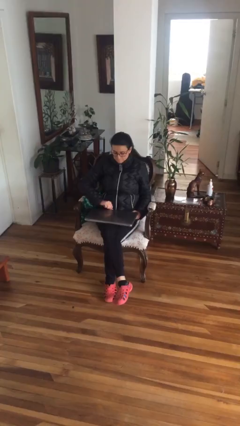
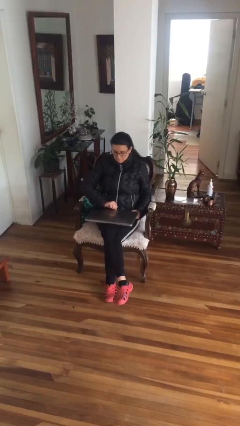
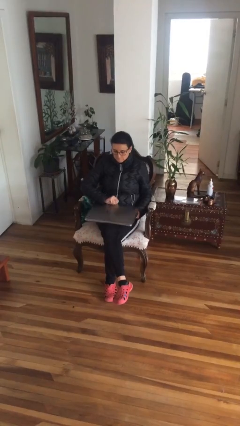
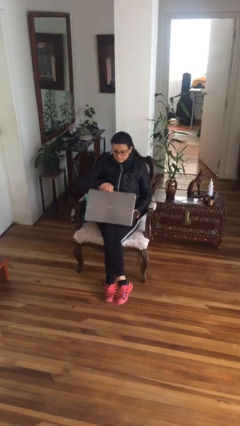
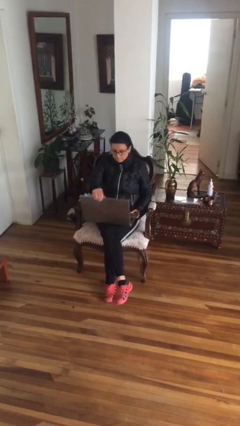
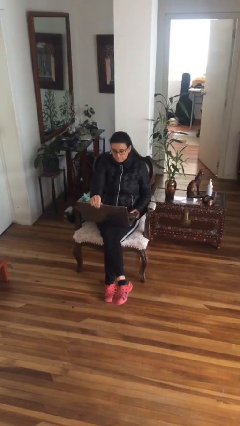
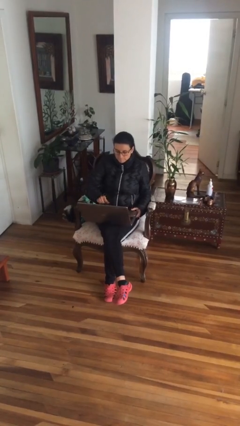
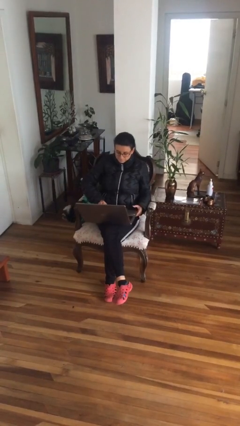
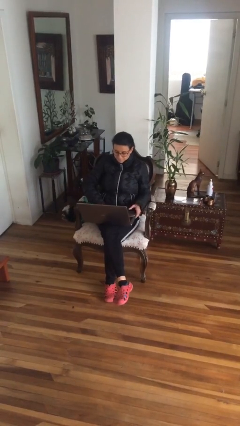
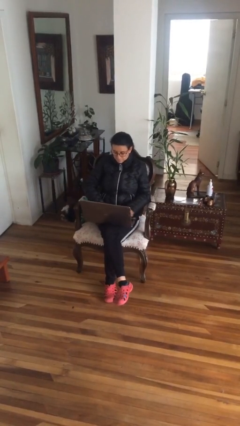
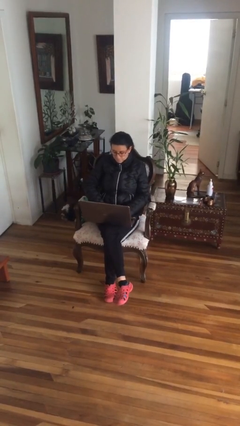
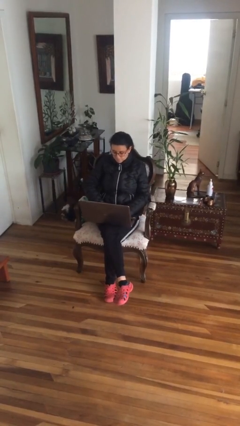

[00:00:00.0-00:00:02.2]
person interacts with laptop

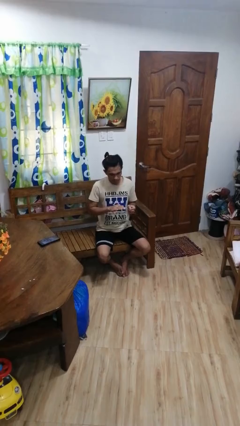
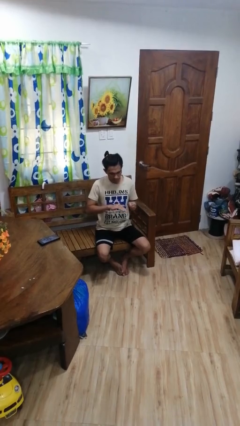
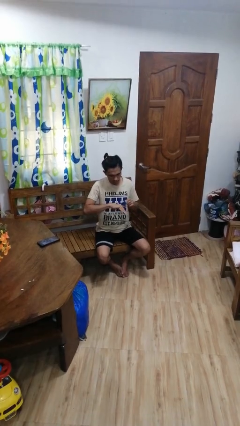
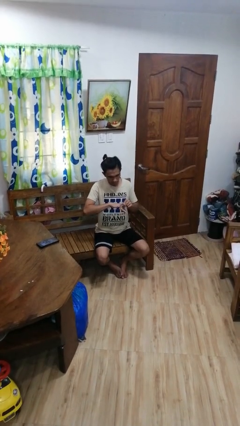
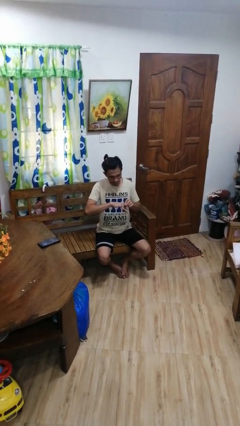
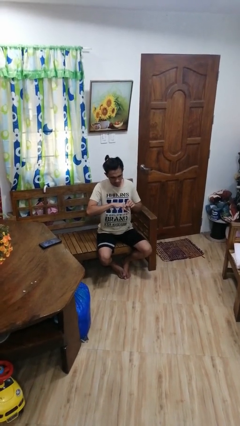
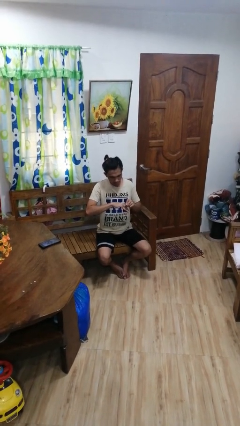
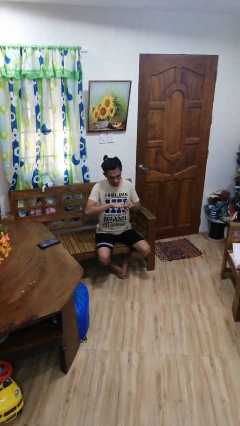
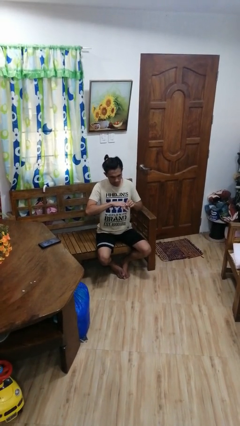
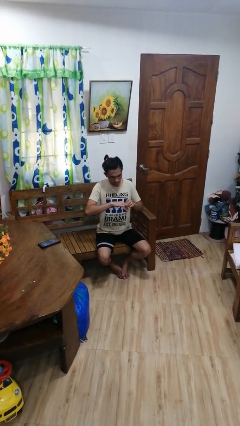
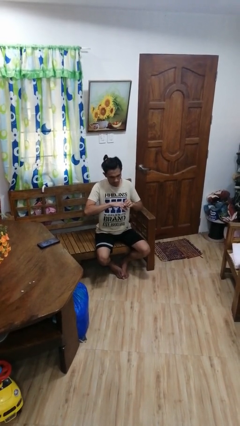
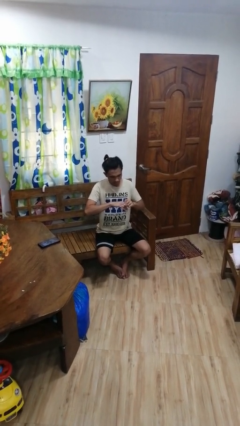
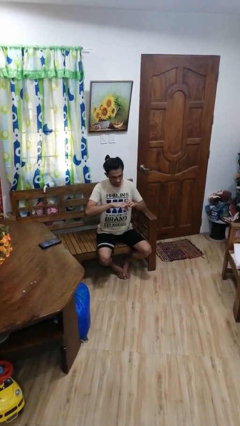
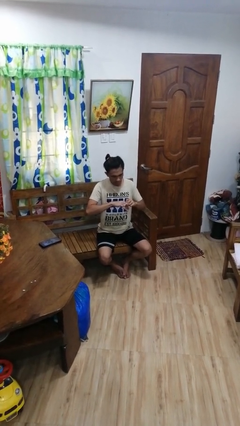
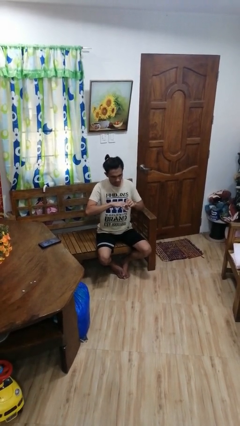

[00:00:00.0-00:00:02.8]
person files fingernails

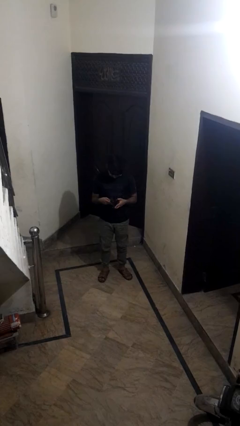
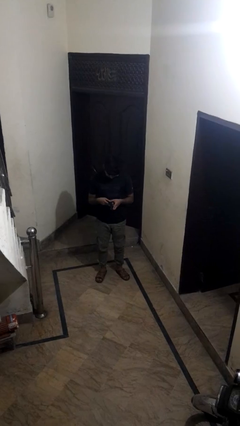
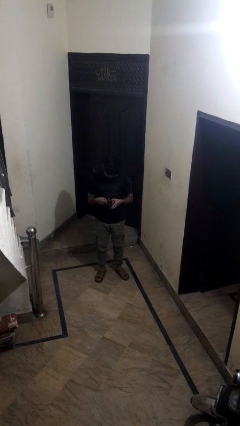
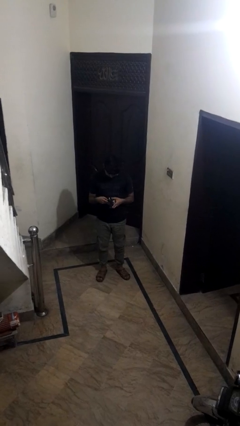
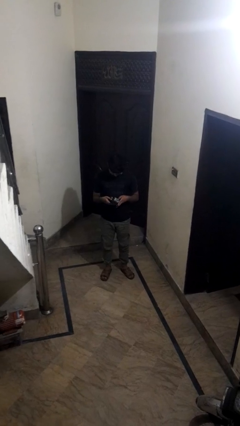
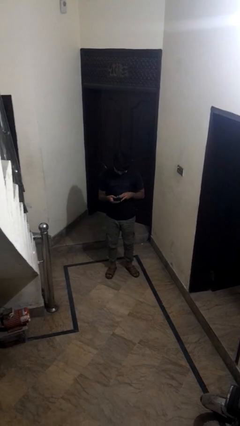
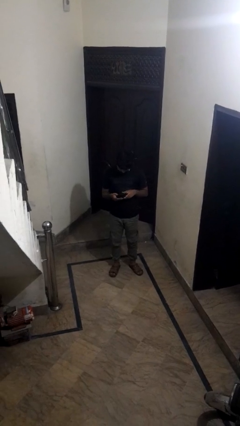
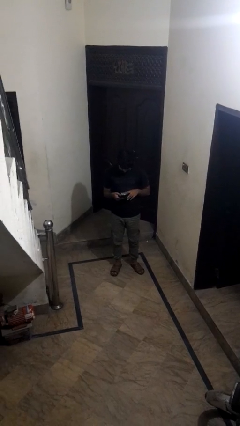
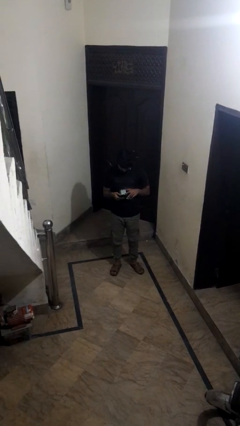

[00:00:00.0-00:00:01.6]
person searches in purse

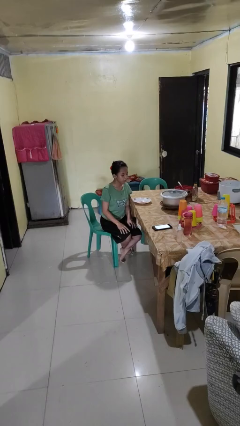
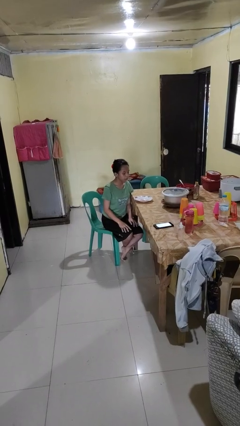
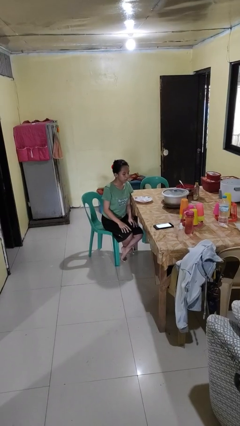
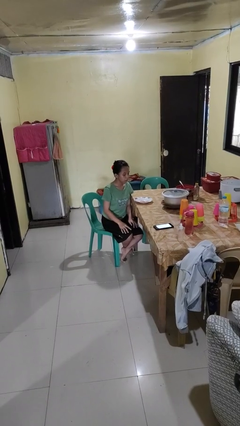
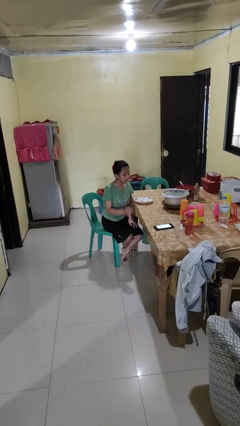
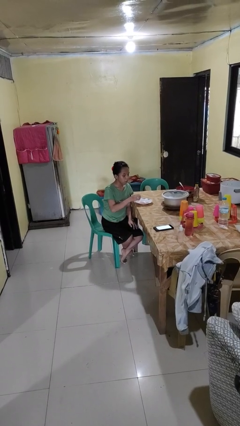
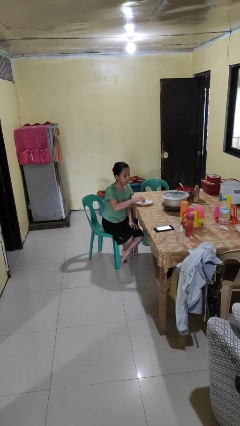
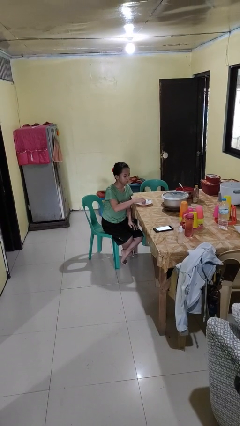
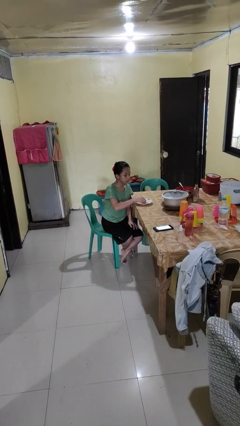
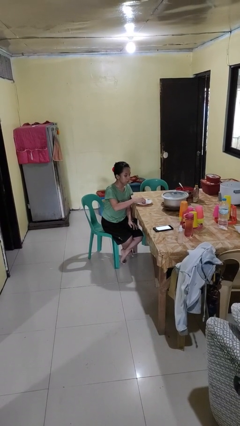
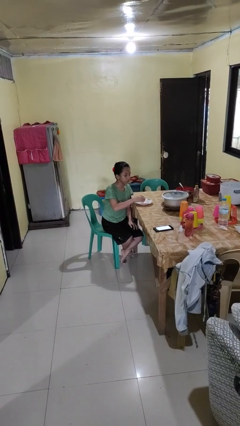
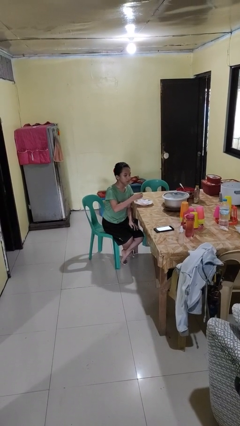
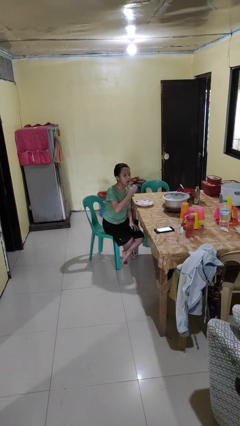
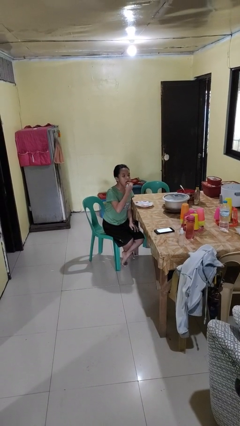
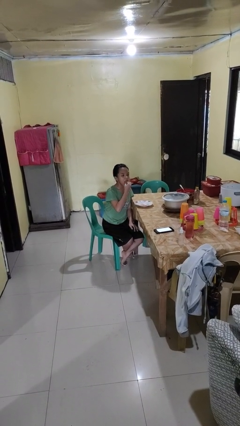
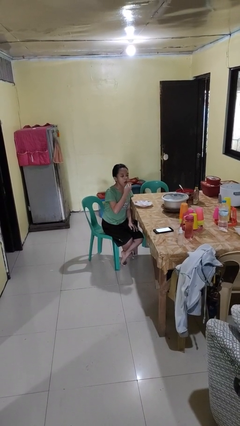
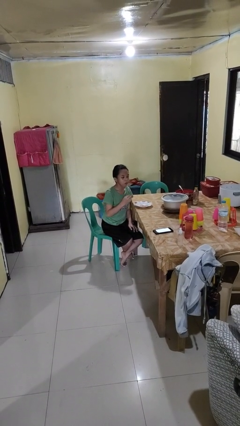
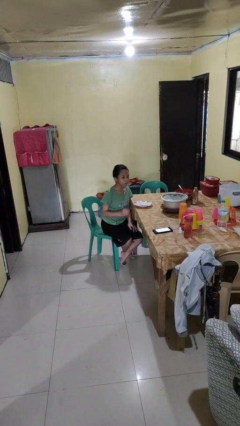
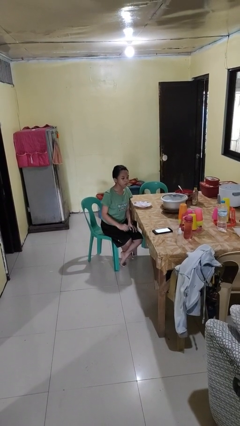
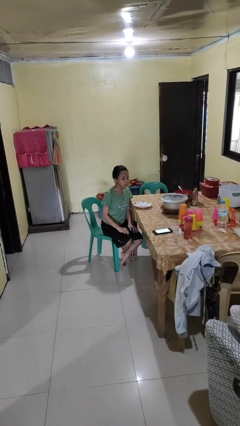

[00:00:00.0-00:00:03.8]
person eats with hands

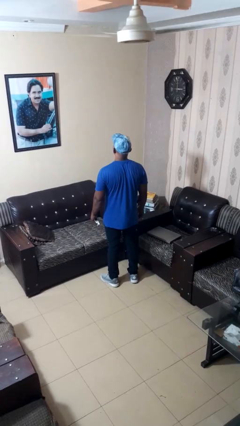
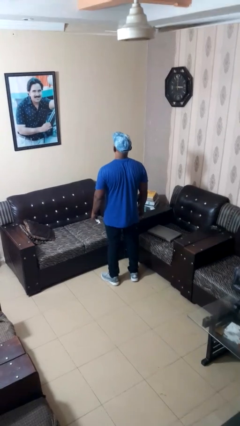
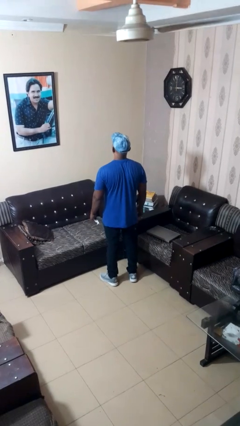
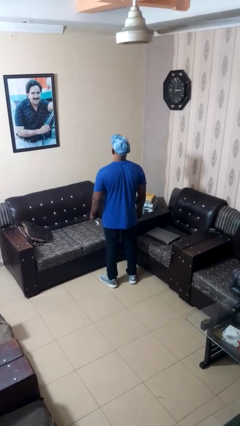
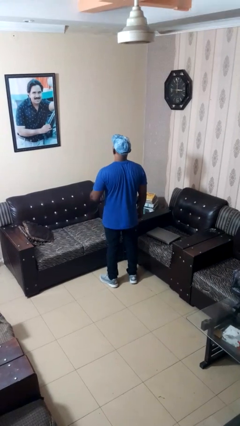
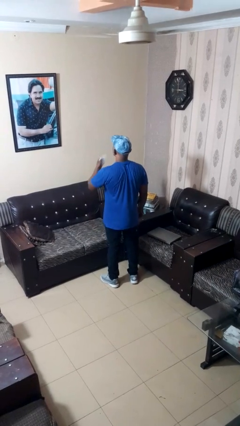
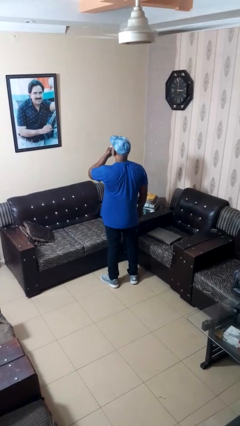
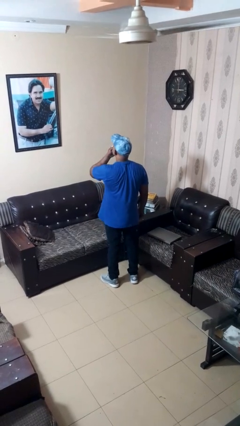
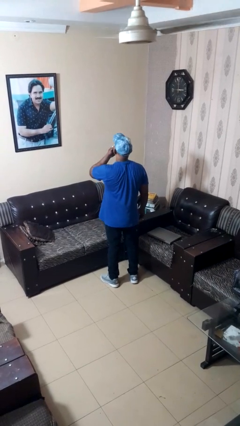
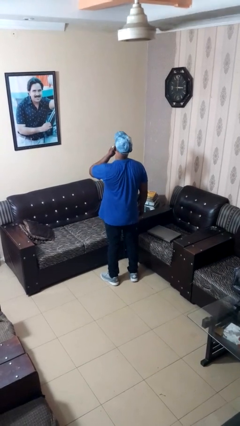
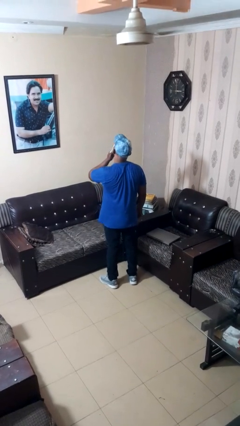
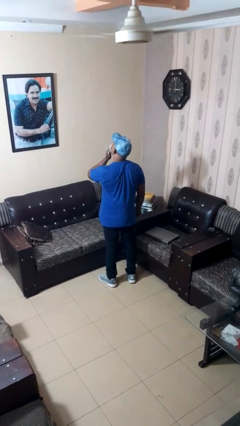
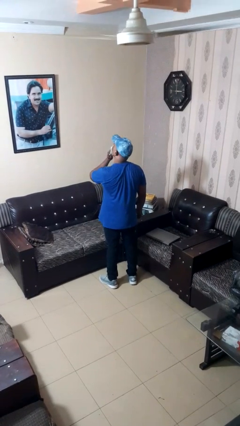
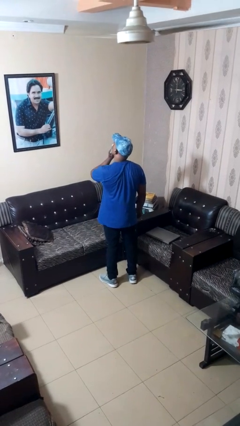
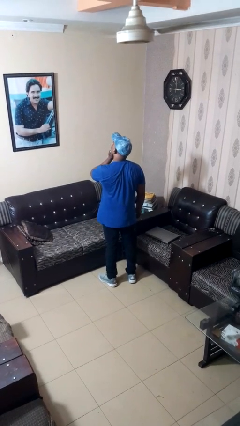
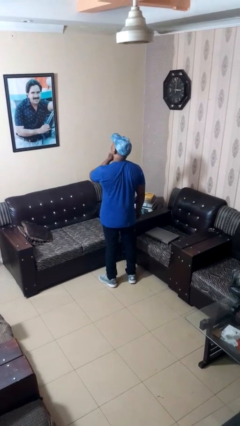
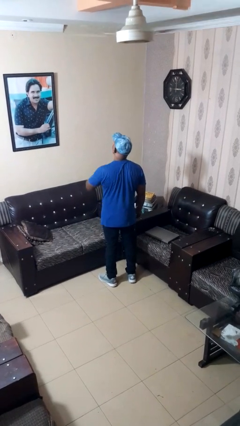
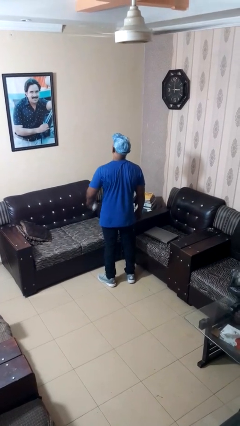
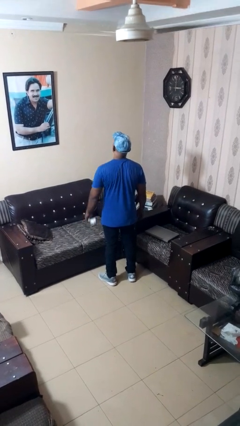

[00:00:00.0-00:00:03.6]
person wipes mouth with napkin

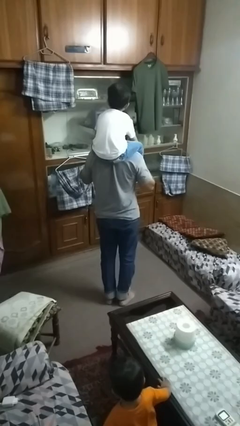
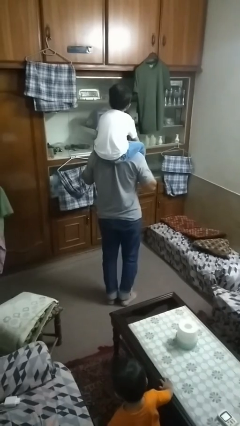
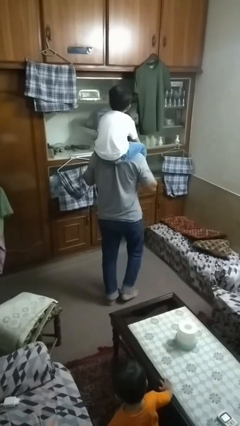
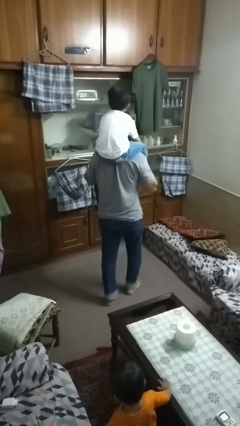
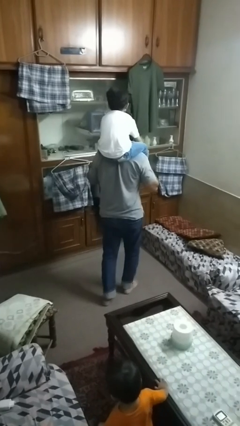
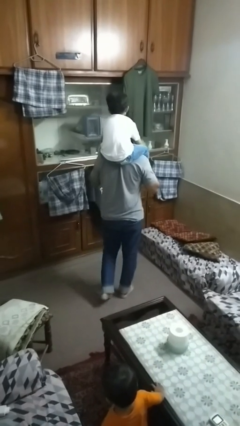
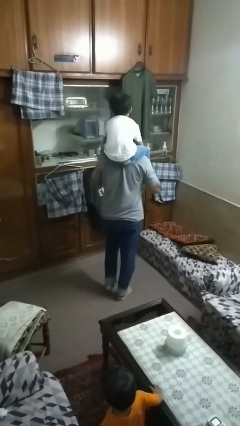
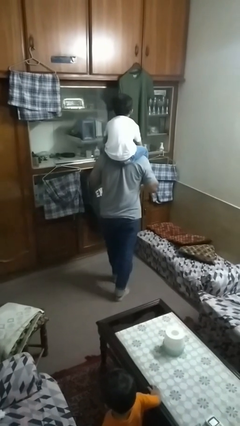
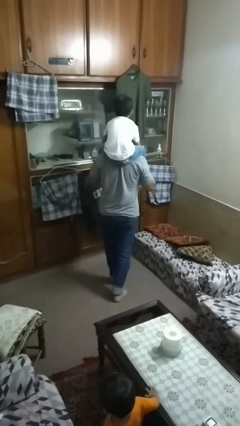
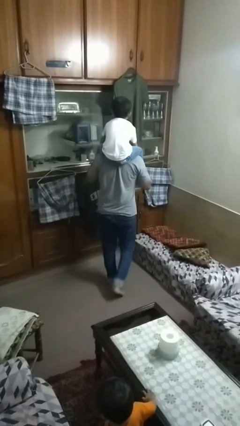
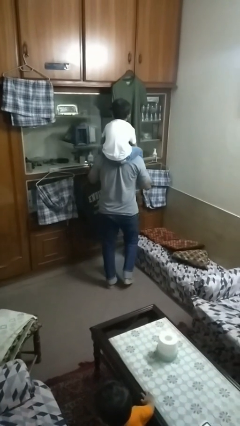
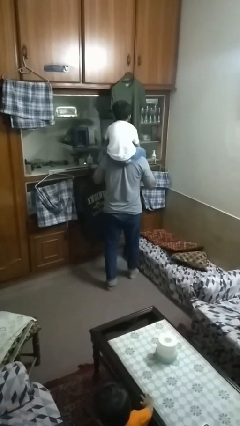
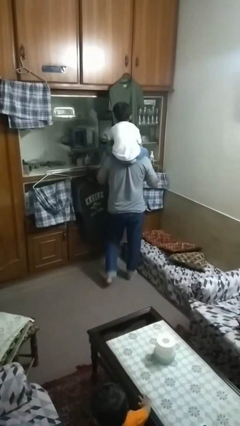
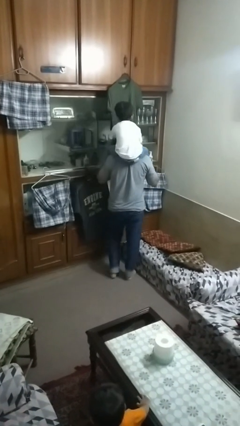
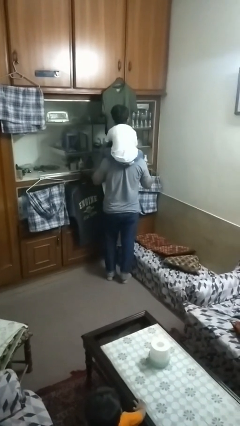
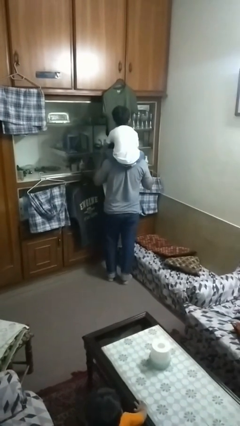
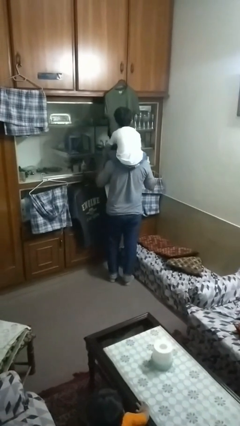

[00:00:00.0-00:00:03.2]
person carries person on shoulders
